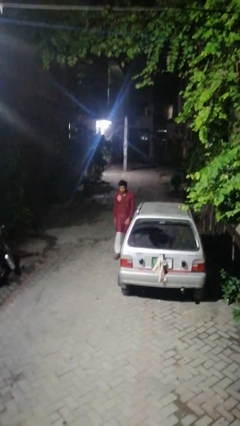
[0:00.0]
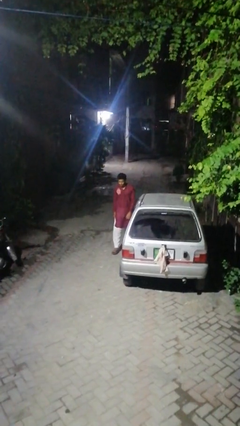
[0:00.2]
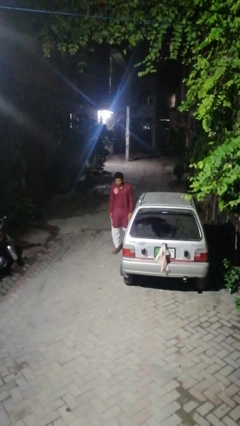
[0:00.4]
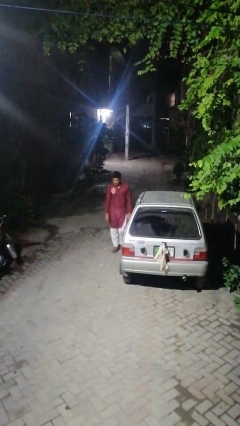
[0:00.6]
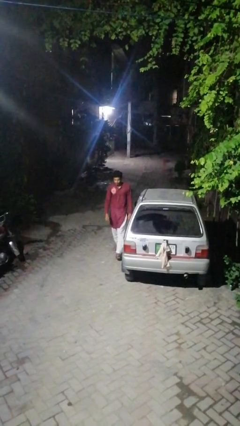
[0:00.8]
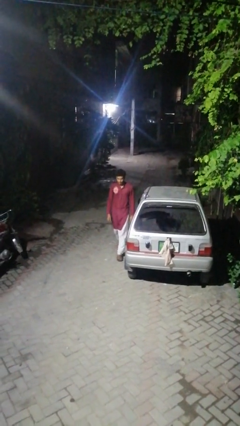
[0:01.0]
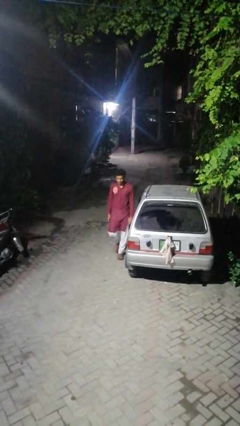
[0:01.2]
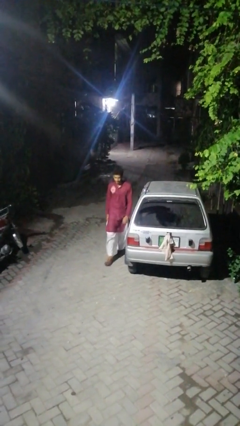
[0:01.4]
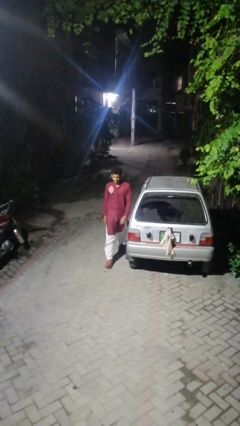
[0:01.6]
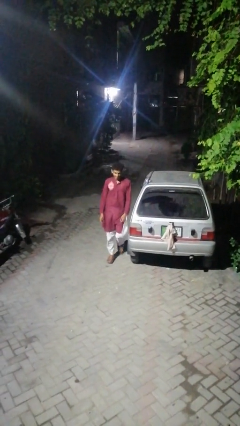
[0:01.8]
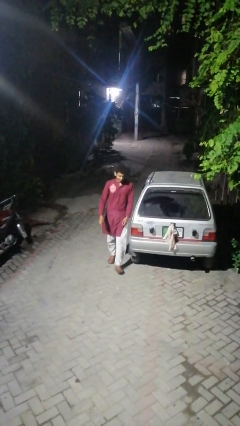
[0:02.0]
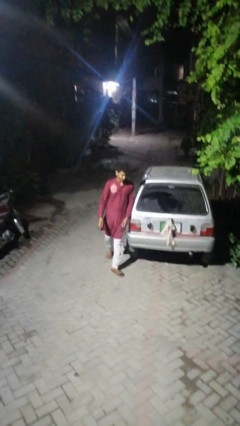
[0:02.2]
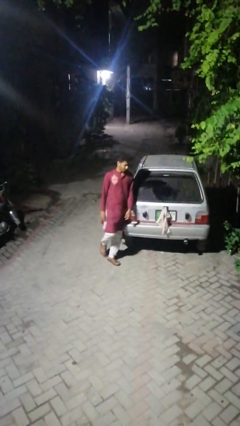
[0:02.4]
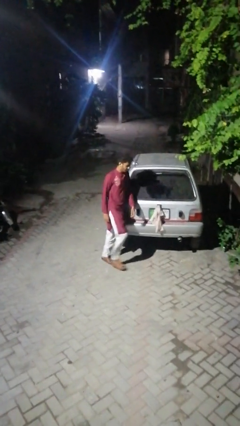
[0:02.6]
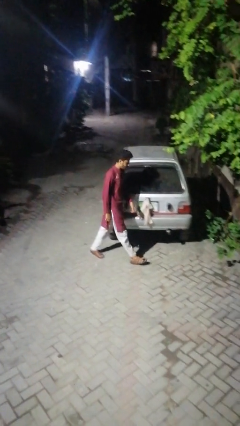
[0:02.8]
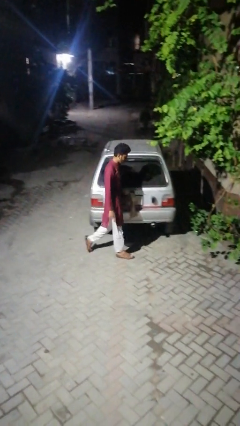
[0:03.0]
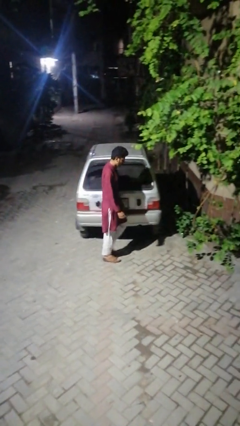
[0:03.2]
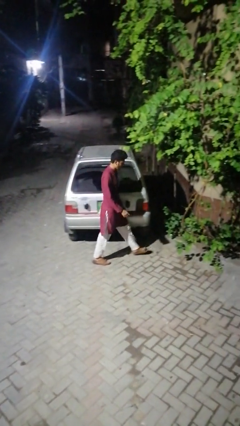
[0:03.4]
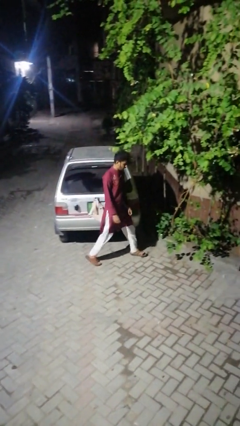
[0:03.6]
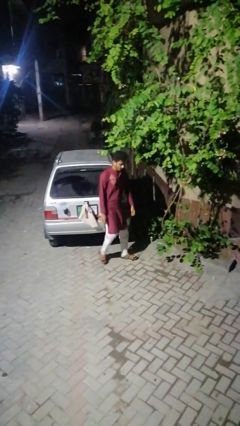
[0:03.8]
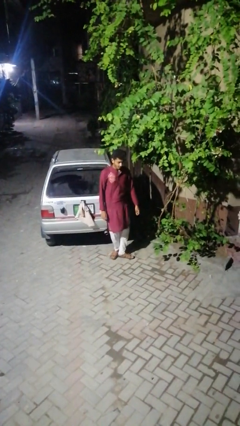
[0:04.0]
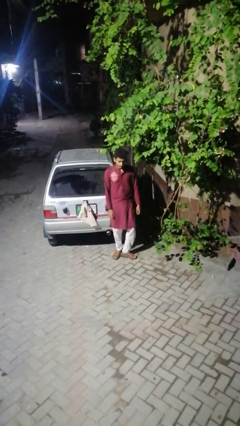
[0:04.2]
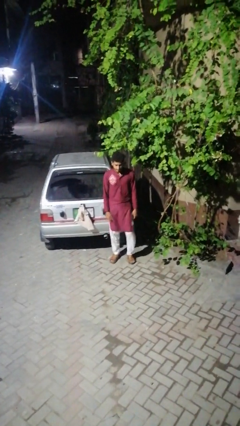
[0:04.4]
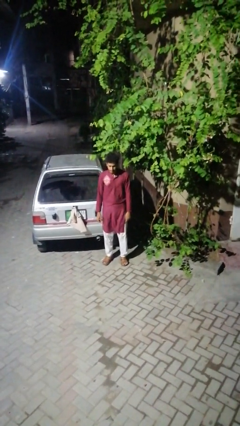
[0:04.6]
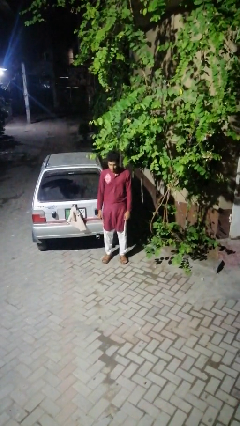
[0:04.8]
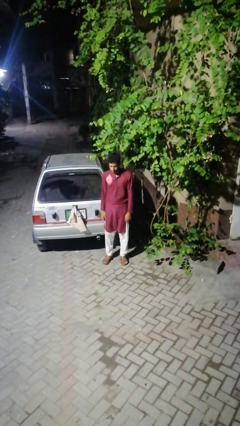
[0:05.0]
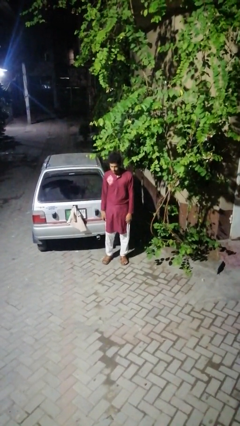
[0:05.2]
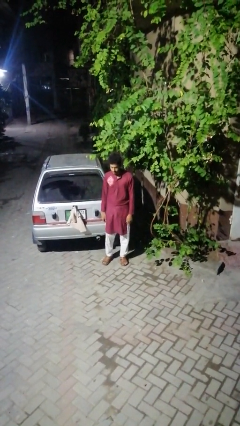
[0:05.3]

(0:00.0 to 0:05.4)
person walks around car

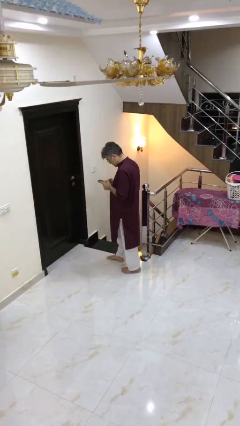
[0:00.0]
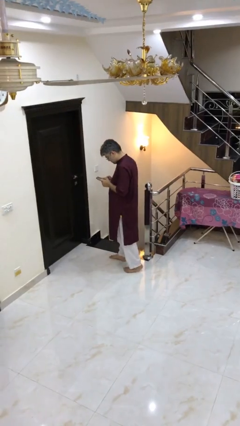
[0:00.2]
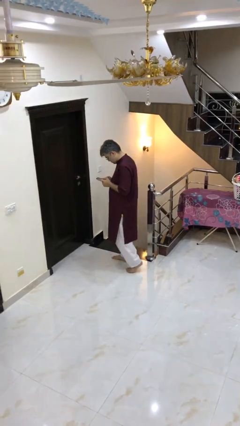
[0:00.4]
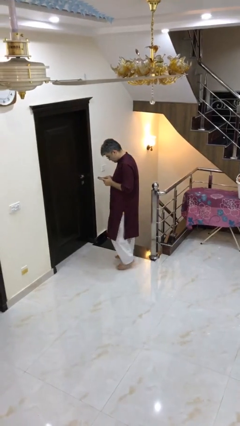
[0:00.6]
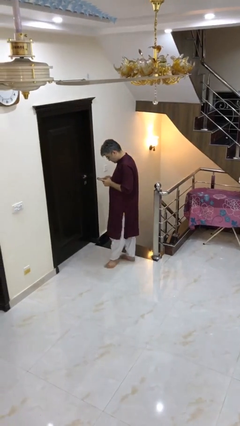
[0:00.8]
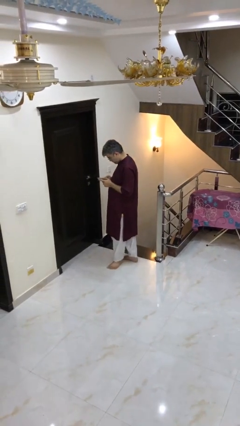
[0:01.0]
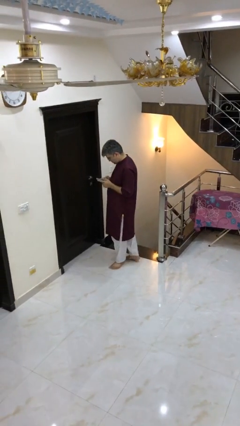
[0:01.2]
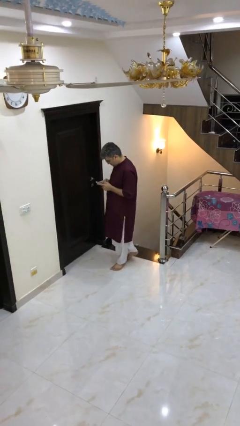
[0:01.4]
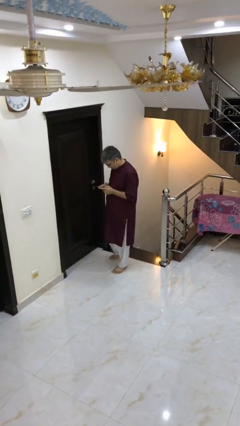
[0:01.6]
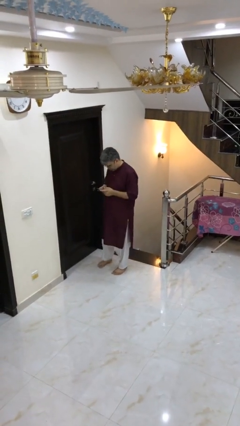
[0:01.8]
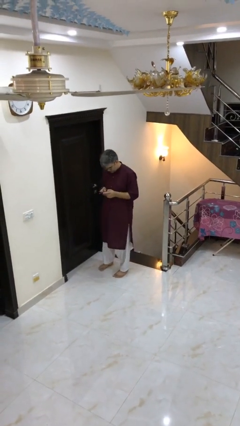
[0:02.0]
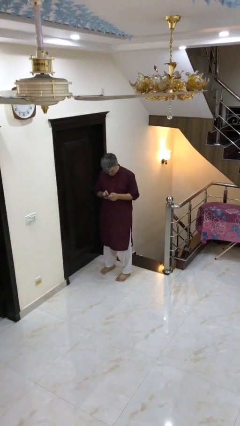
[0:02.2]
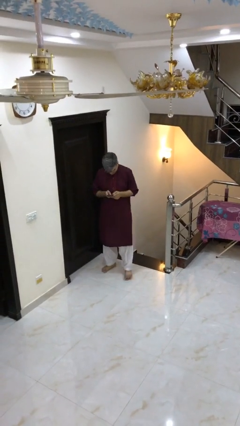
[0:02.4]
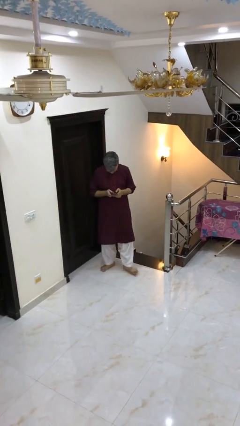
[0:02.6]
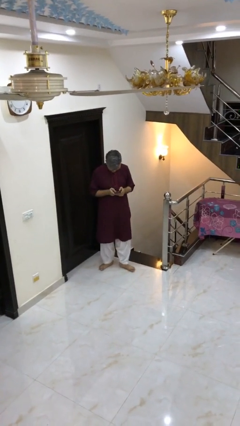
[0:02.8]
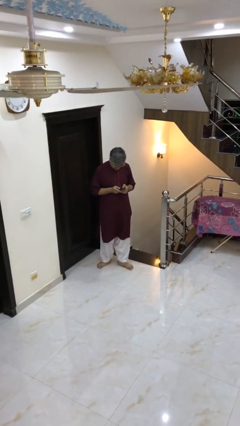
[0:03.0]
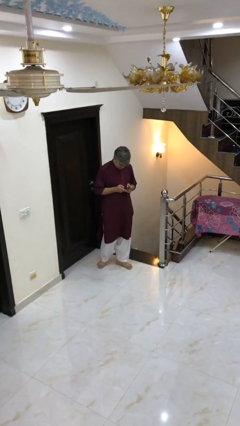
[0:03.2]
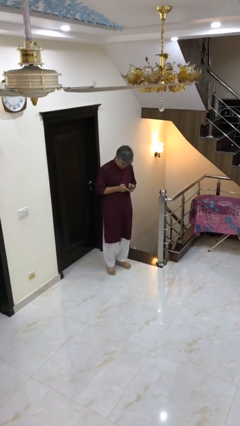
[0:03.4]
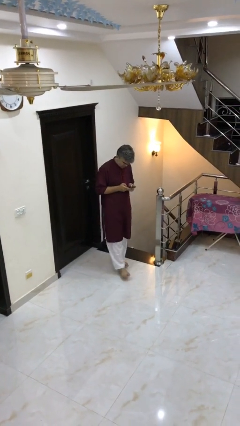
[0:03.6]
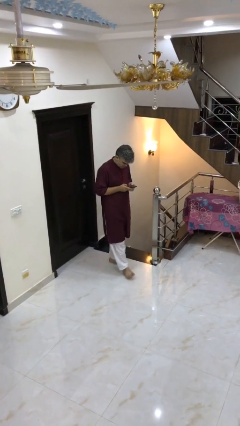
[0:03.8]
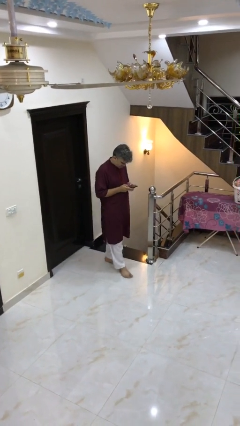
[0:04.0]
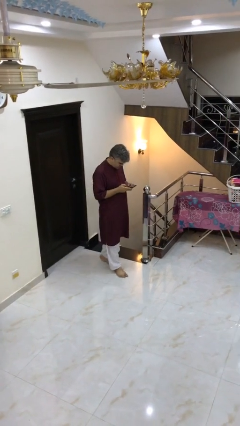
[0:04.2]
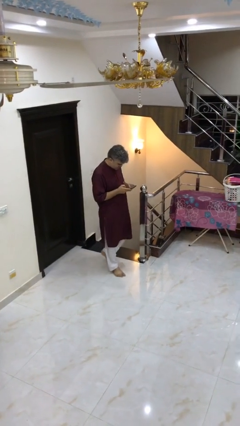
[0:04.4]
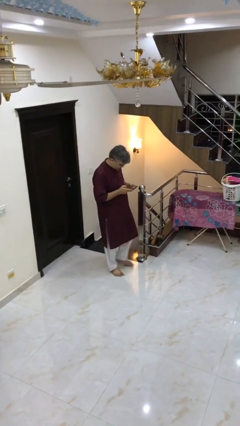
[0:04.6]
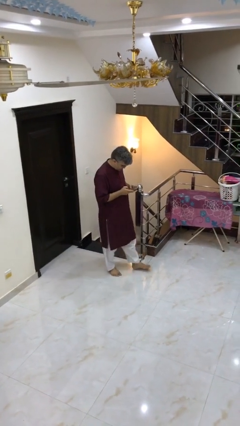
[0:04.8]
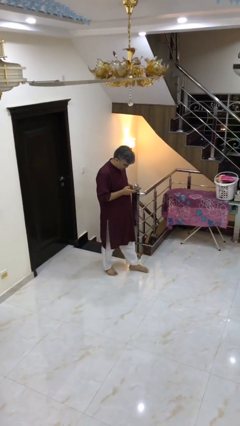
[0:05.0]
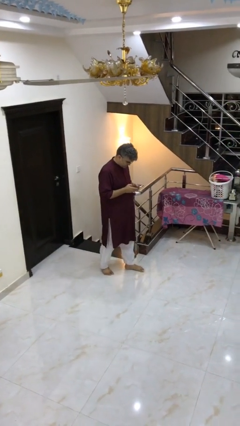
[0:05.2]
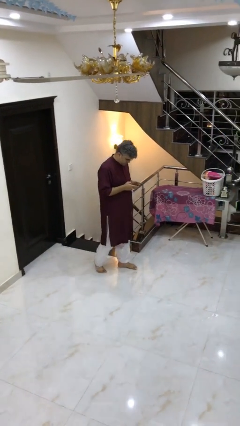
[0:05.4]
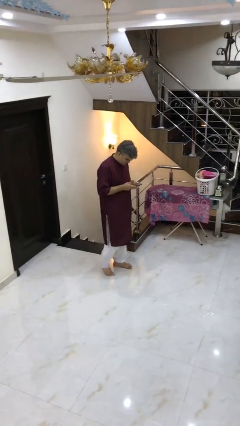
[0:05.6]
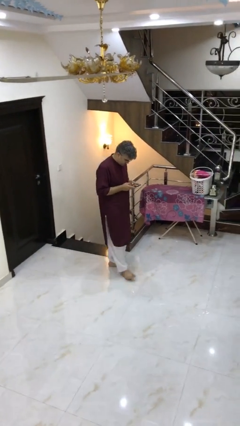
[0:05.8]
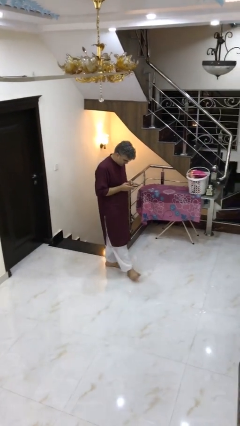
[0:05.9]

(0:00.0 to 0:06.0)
person texts on phone

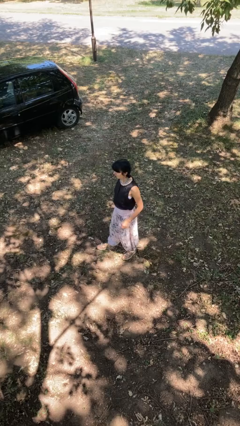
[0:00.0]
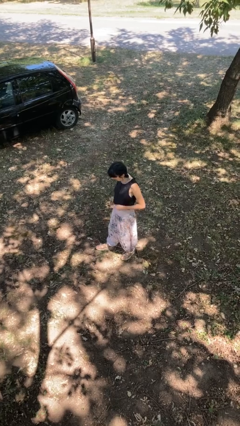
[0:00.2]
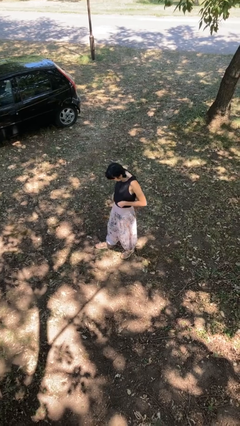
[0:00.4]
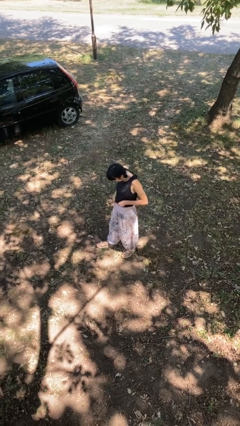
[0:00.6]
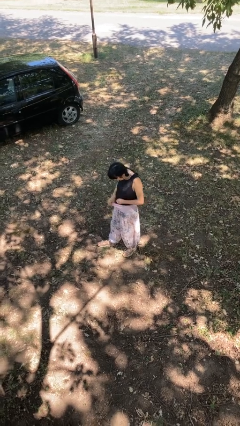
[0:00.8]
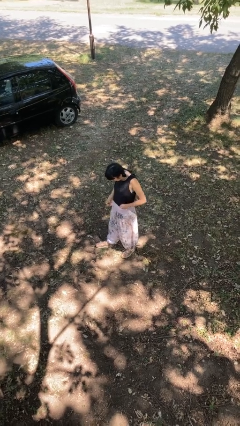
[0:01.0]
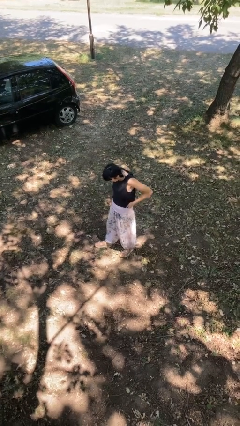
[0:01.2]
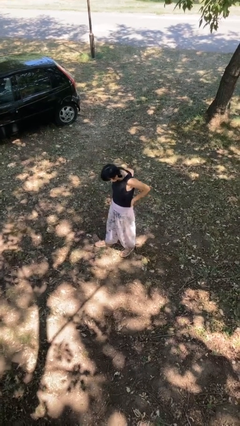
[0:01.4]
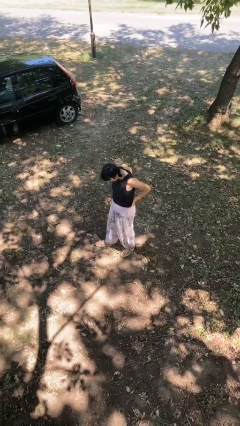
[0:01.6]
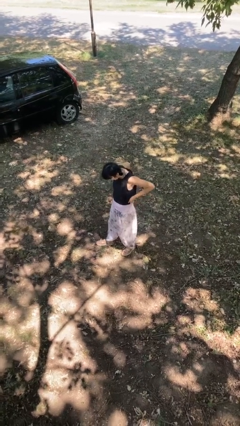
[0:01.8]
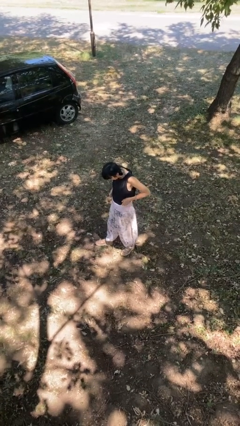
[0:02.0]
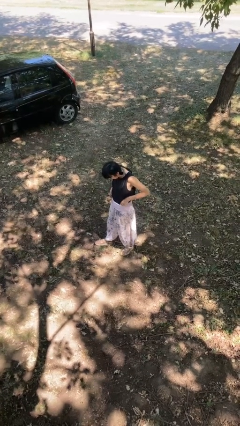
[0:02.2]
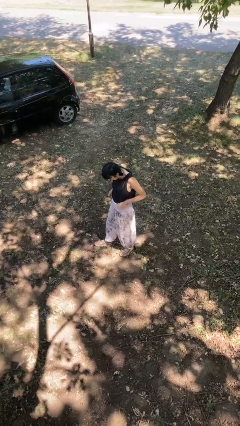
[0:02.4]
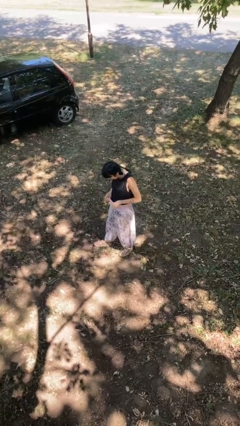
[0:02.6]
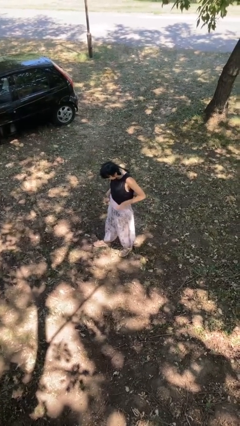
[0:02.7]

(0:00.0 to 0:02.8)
person hikes up pants

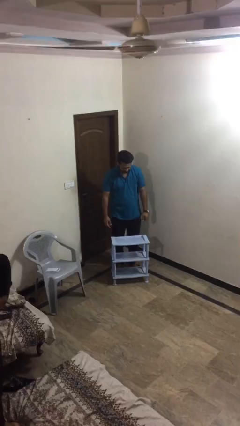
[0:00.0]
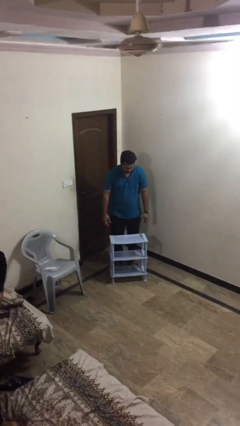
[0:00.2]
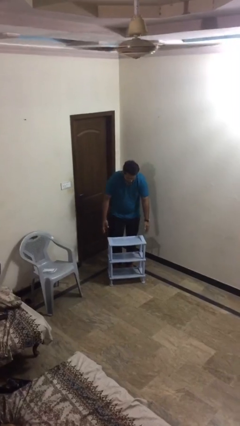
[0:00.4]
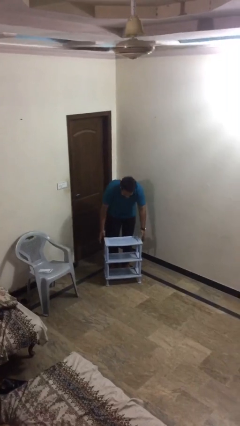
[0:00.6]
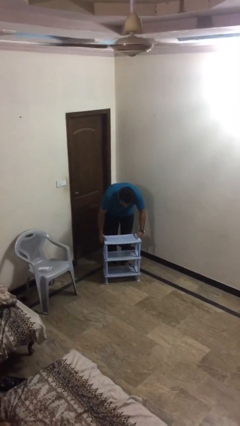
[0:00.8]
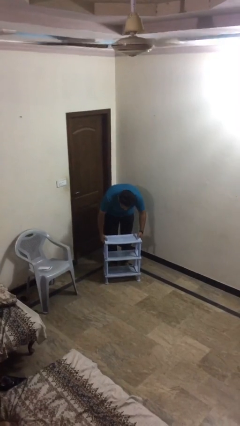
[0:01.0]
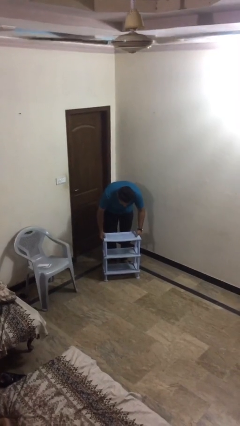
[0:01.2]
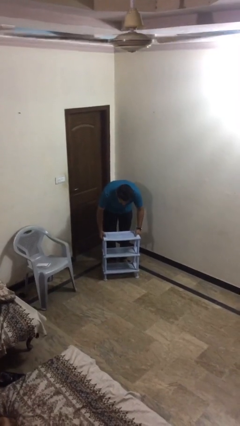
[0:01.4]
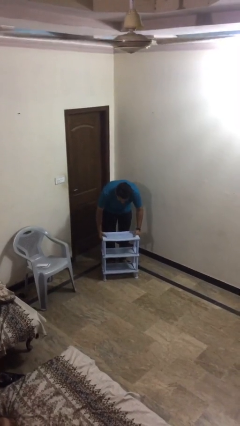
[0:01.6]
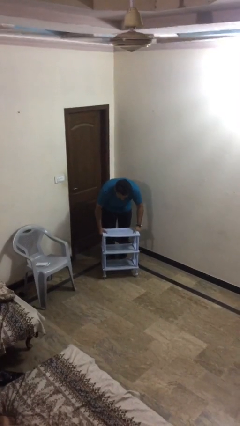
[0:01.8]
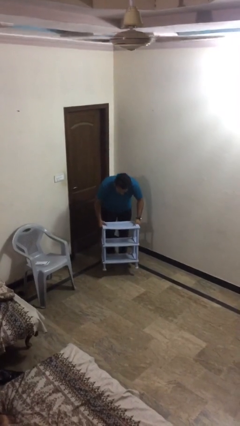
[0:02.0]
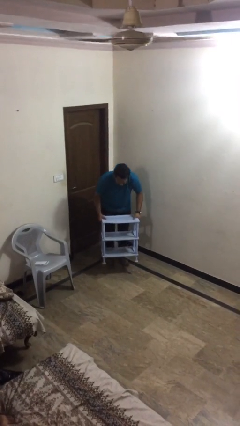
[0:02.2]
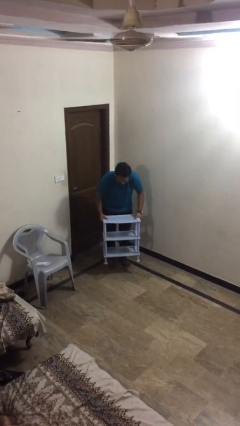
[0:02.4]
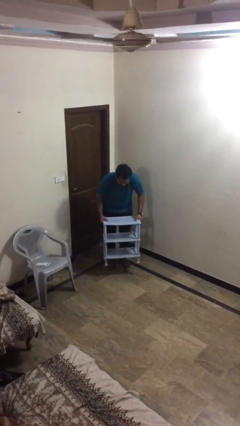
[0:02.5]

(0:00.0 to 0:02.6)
person picks up object from floor

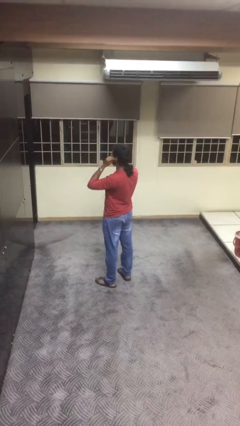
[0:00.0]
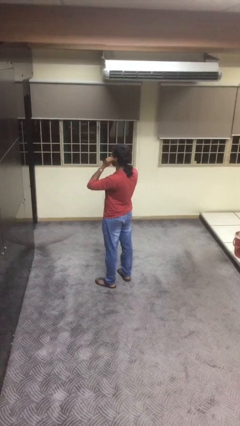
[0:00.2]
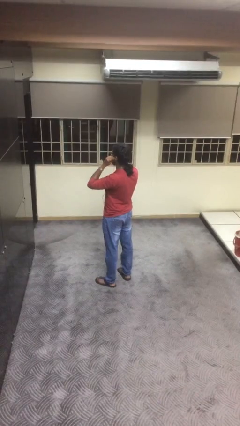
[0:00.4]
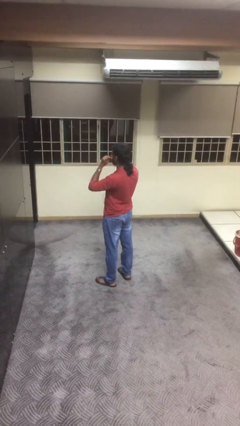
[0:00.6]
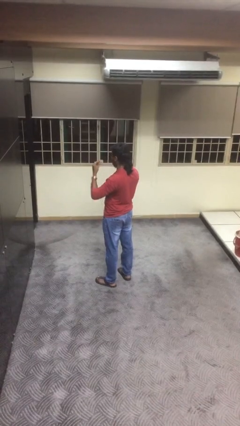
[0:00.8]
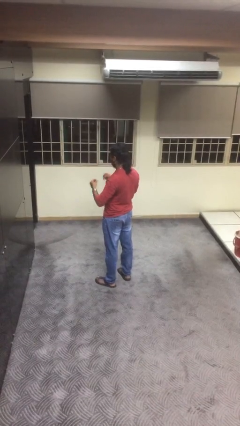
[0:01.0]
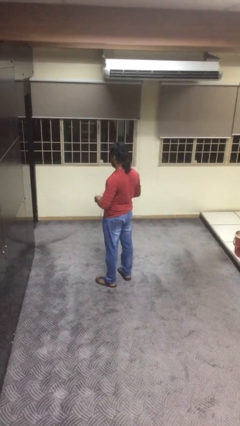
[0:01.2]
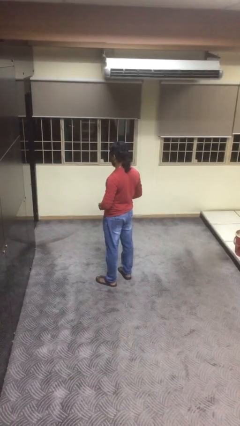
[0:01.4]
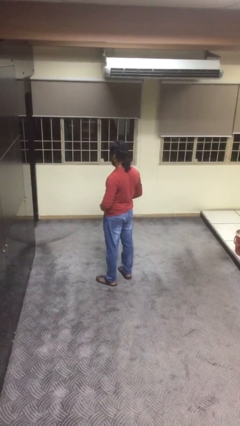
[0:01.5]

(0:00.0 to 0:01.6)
person takes off headphones
